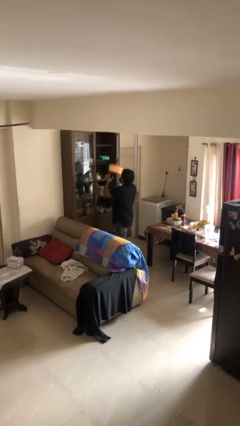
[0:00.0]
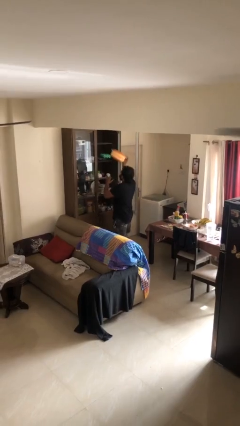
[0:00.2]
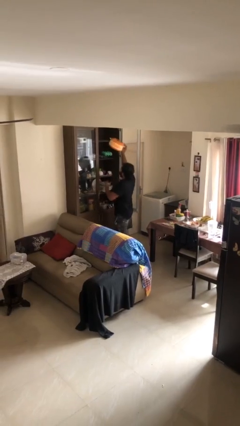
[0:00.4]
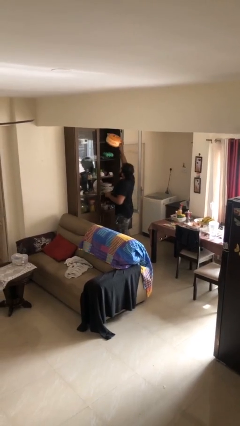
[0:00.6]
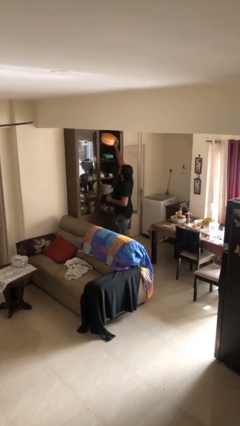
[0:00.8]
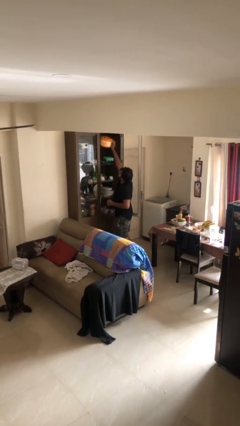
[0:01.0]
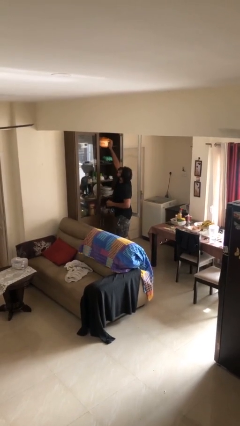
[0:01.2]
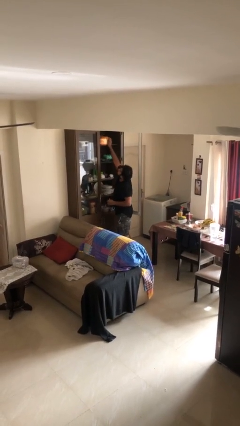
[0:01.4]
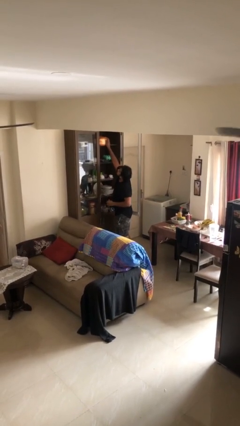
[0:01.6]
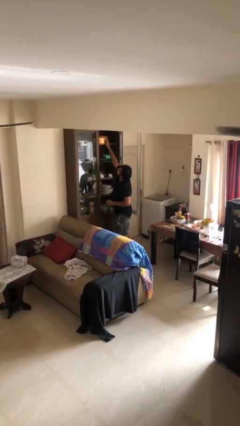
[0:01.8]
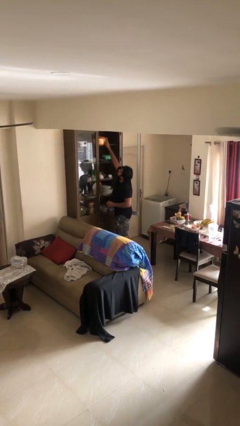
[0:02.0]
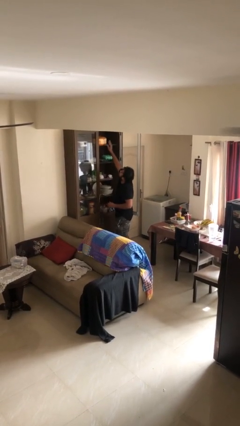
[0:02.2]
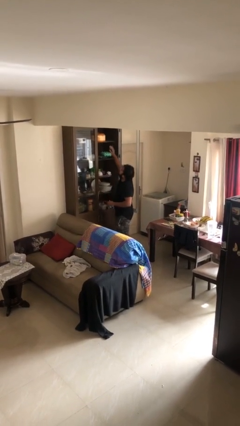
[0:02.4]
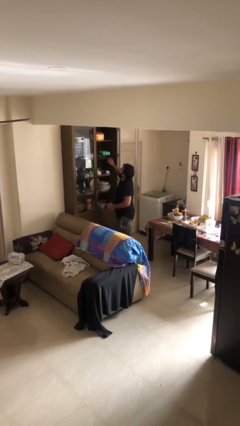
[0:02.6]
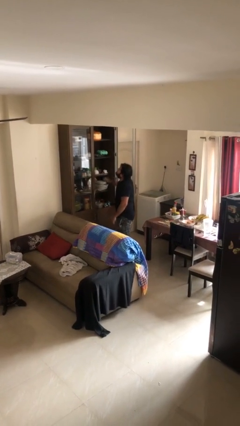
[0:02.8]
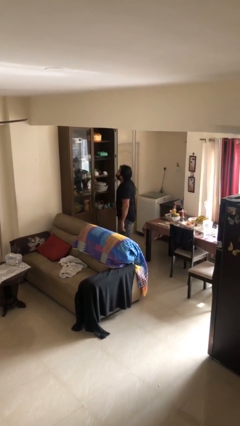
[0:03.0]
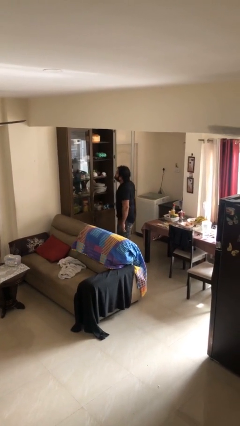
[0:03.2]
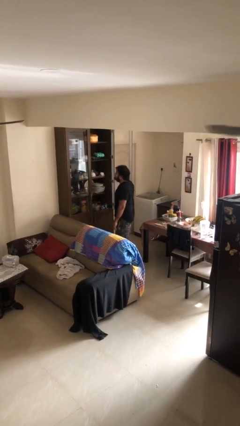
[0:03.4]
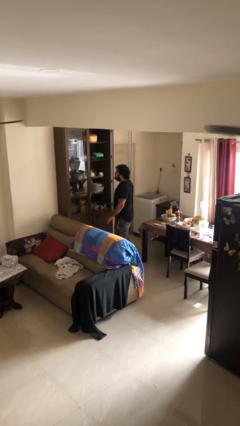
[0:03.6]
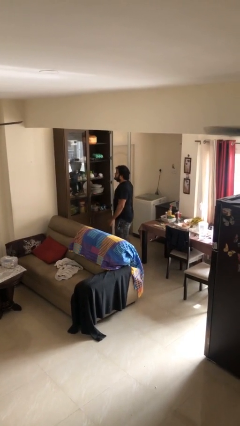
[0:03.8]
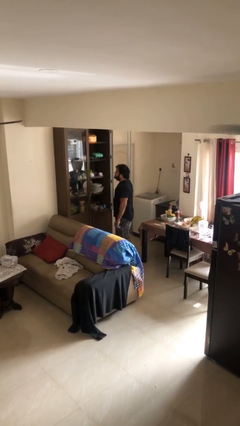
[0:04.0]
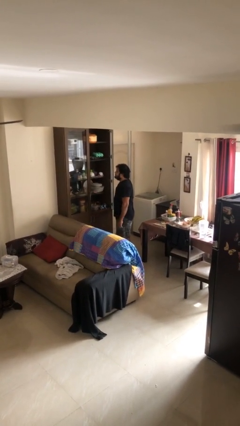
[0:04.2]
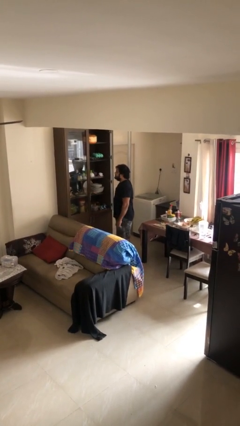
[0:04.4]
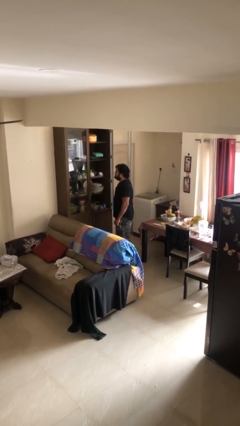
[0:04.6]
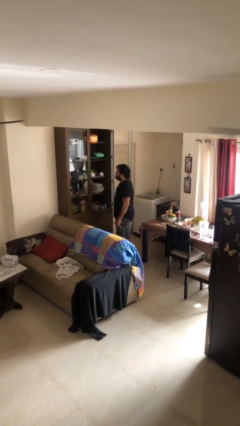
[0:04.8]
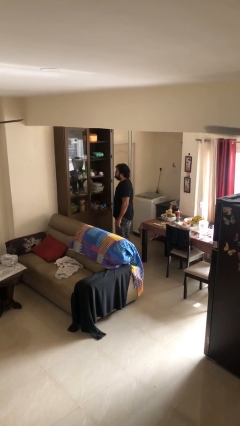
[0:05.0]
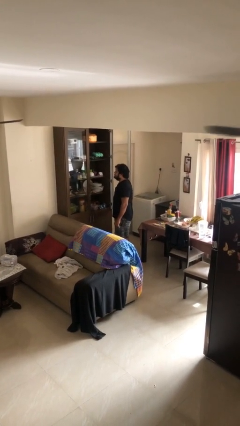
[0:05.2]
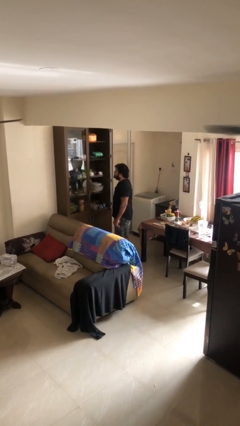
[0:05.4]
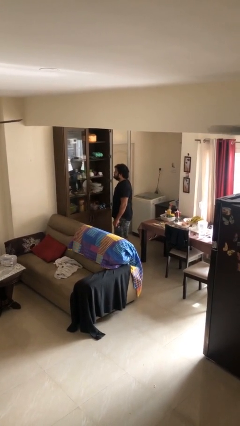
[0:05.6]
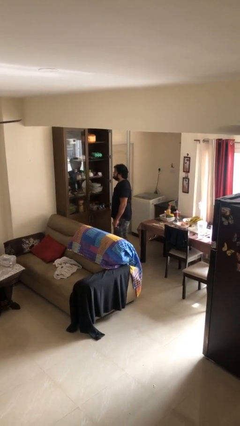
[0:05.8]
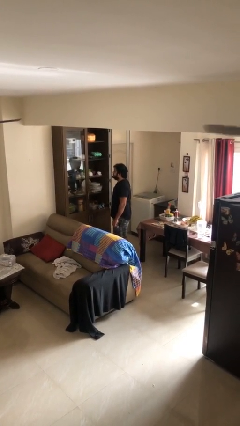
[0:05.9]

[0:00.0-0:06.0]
person puts down object on shelf

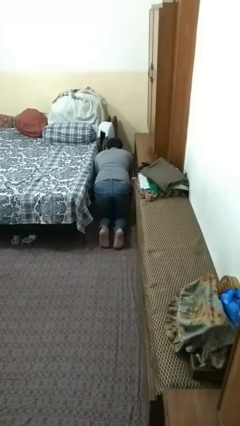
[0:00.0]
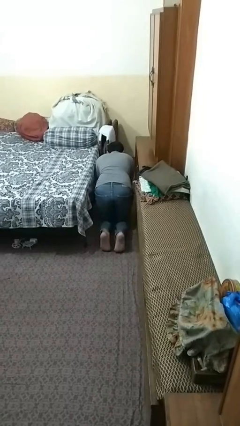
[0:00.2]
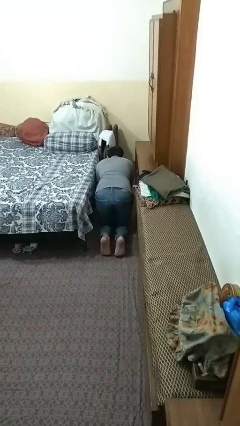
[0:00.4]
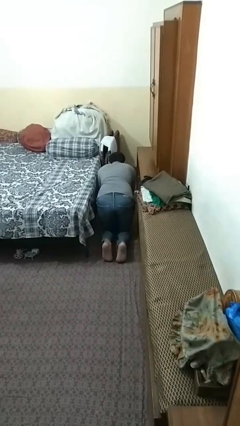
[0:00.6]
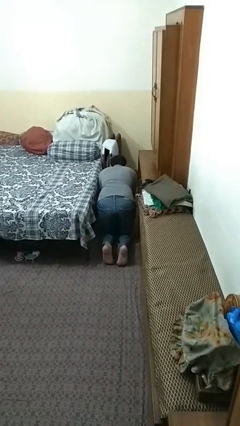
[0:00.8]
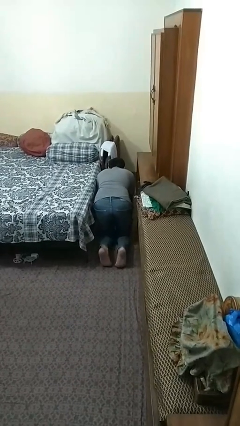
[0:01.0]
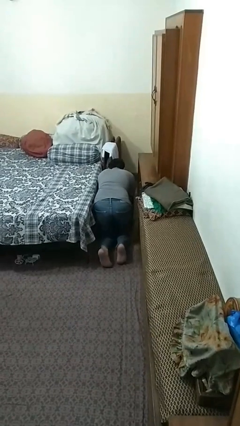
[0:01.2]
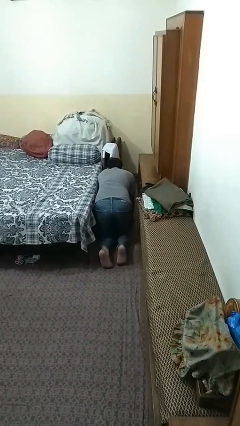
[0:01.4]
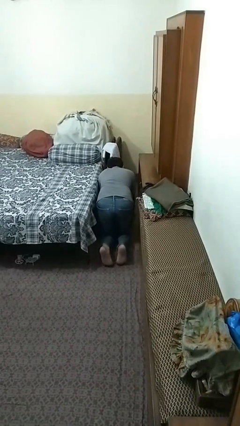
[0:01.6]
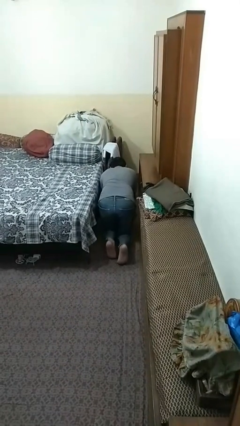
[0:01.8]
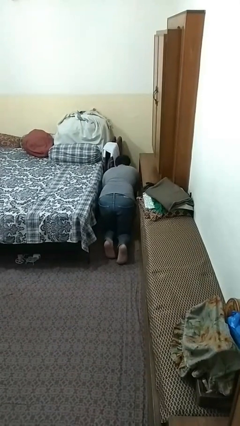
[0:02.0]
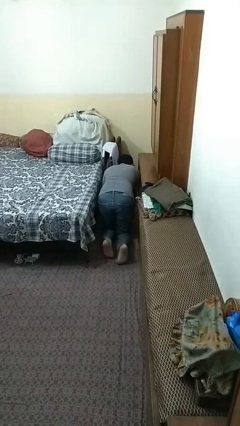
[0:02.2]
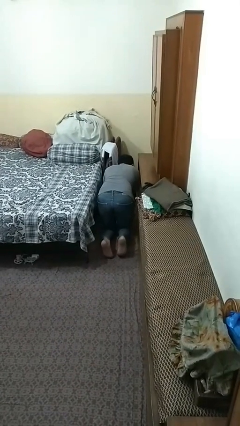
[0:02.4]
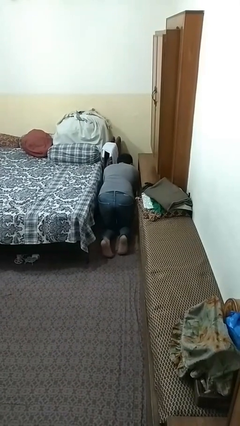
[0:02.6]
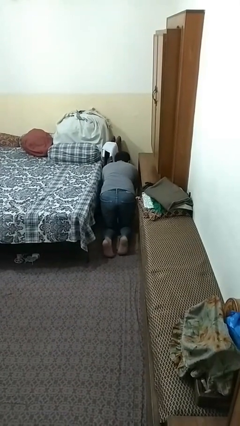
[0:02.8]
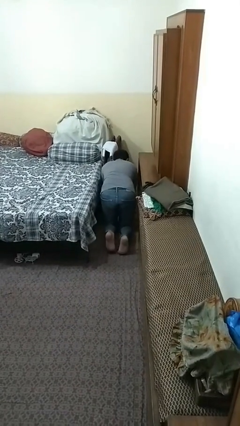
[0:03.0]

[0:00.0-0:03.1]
person crawls

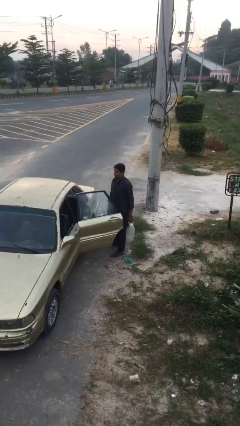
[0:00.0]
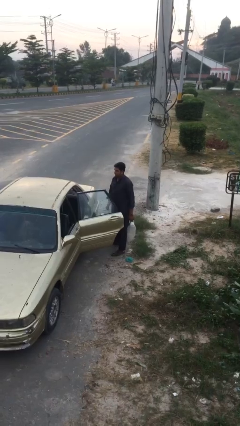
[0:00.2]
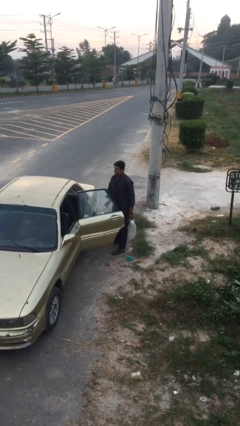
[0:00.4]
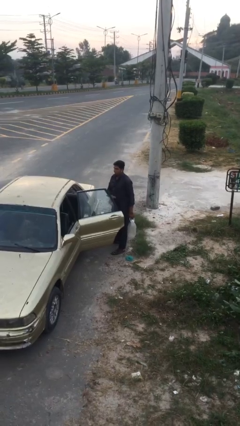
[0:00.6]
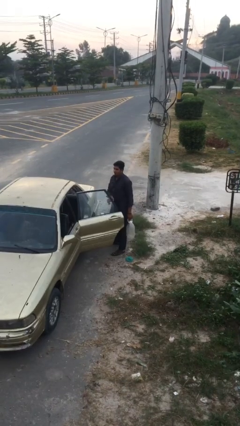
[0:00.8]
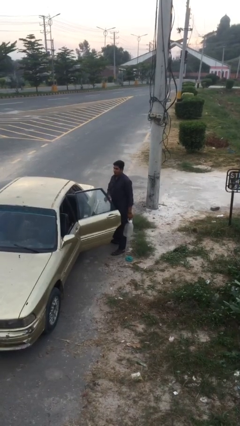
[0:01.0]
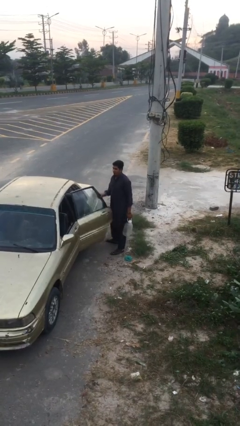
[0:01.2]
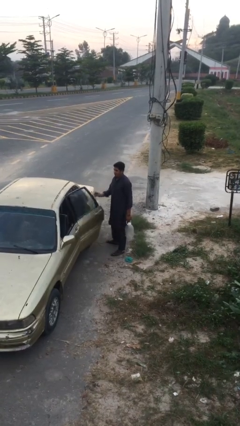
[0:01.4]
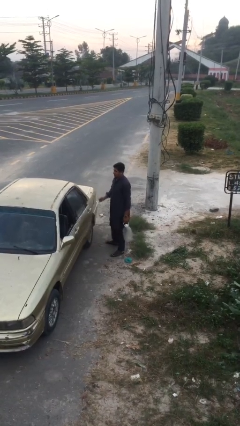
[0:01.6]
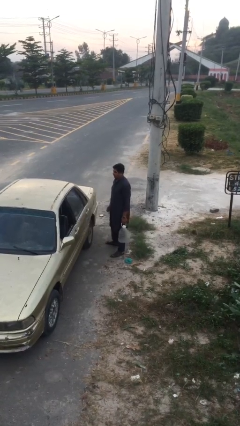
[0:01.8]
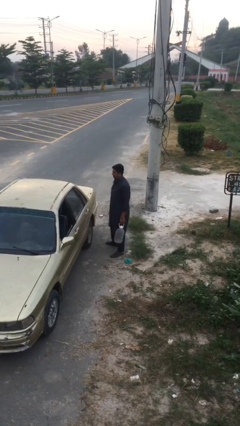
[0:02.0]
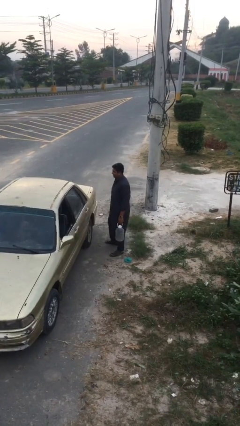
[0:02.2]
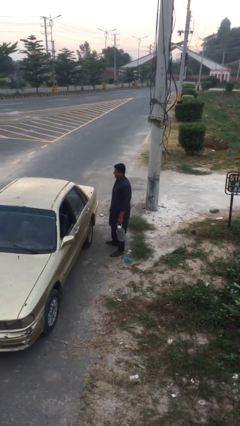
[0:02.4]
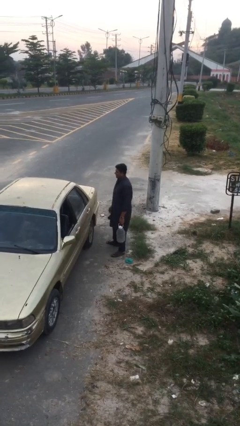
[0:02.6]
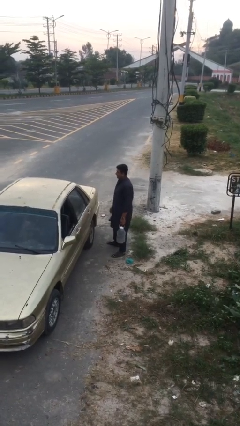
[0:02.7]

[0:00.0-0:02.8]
person closes car door

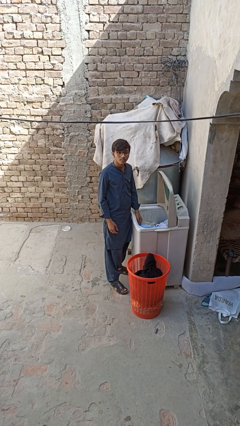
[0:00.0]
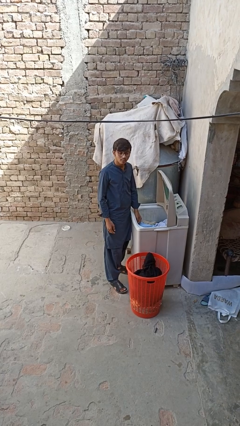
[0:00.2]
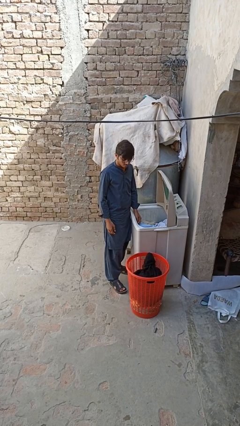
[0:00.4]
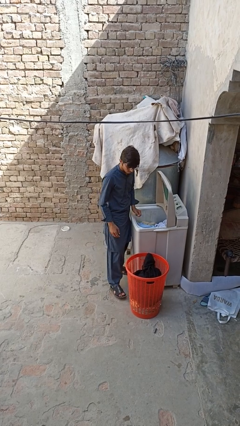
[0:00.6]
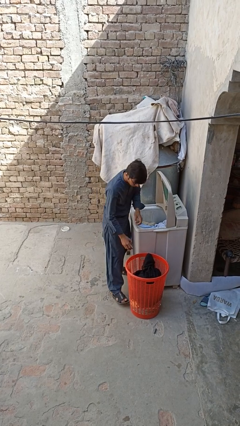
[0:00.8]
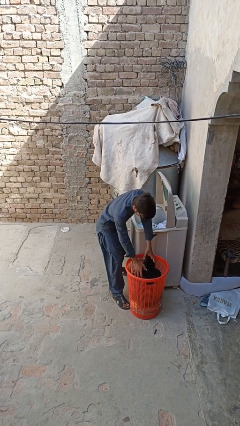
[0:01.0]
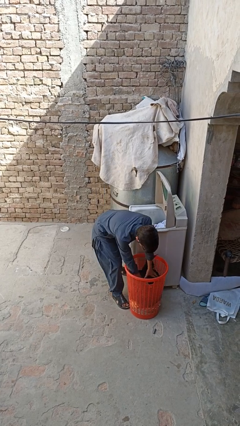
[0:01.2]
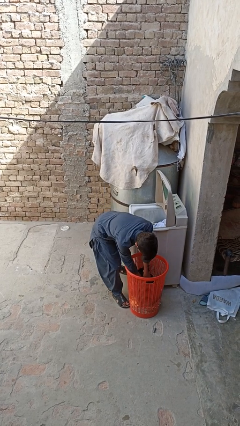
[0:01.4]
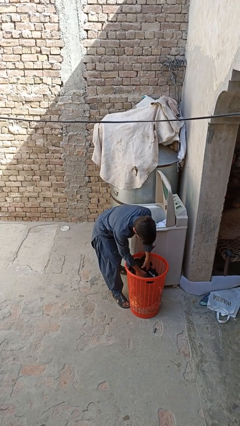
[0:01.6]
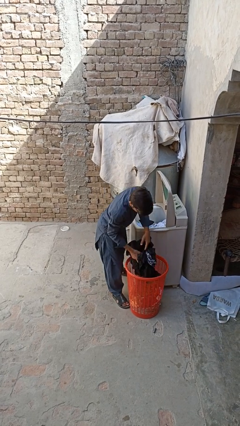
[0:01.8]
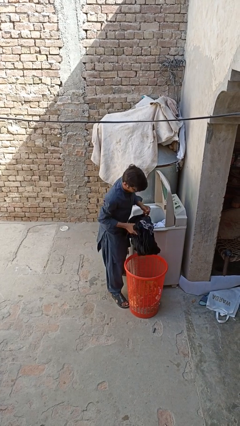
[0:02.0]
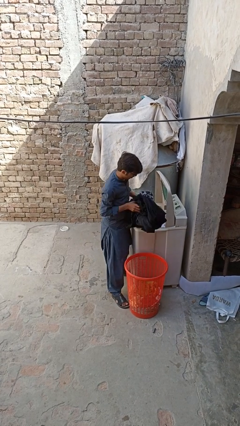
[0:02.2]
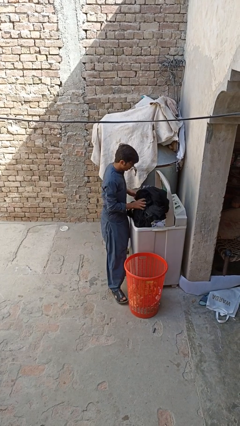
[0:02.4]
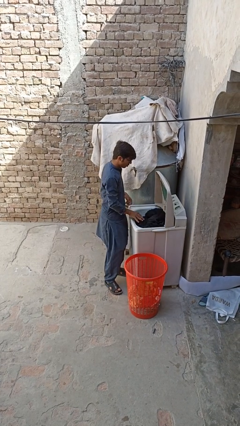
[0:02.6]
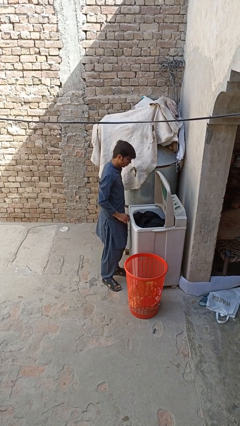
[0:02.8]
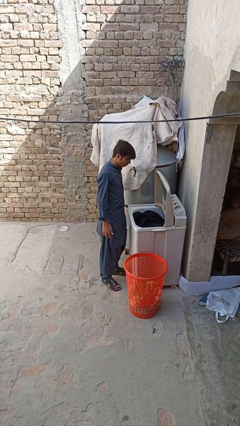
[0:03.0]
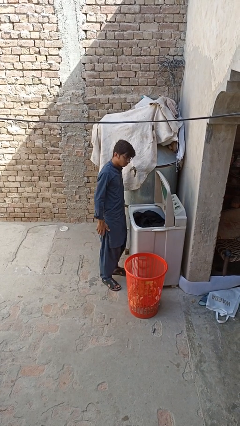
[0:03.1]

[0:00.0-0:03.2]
person loads clotheswasher

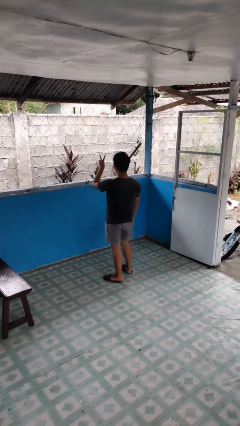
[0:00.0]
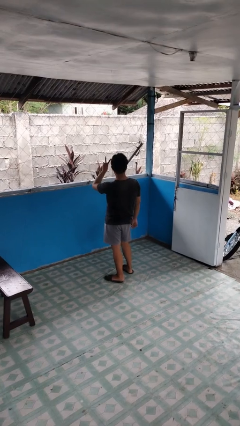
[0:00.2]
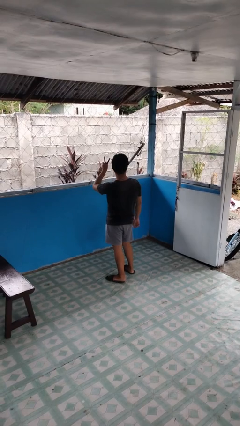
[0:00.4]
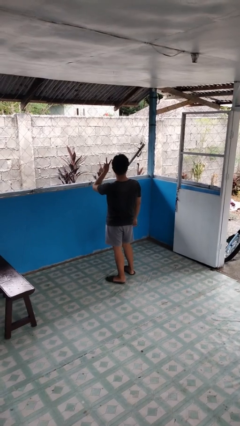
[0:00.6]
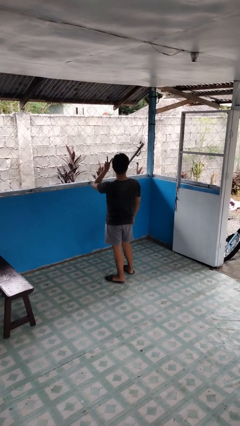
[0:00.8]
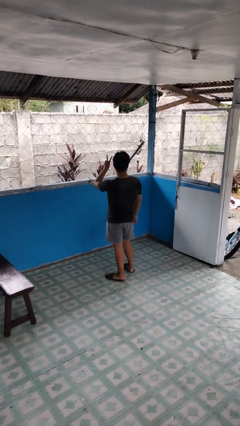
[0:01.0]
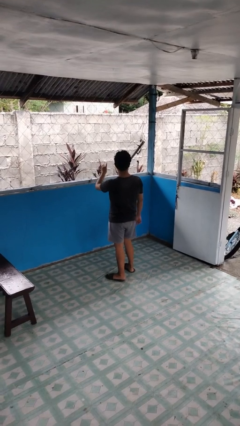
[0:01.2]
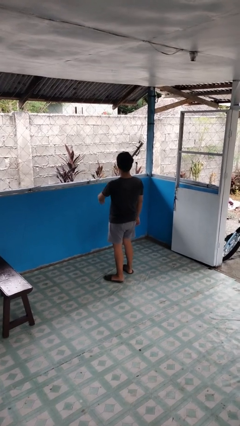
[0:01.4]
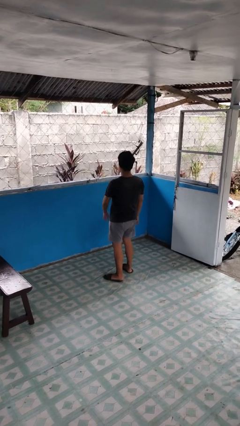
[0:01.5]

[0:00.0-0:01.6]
person gestures peace

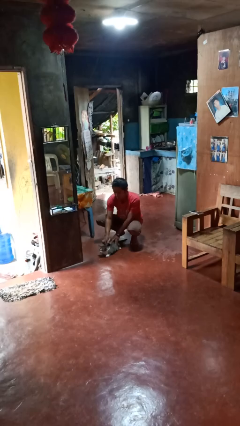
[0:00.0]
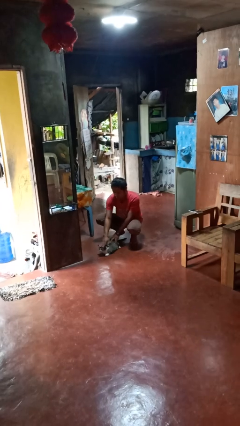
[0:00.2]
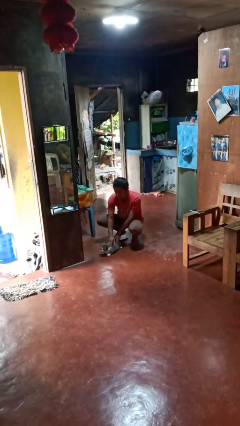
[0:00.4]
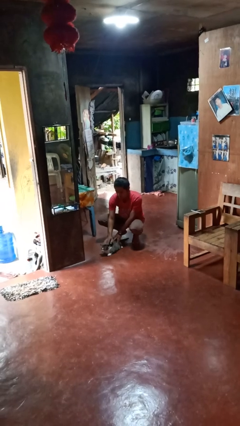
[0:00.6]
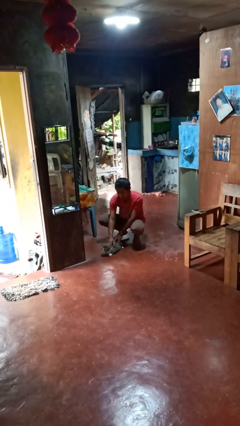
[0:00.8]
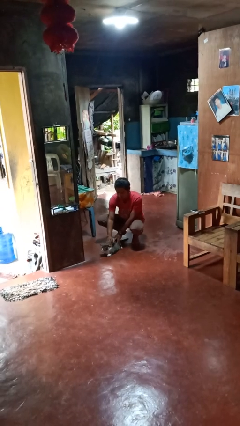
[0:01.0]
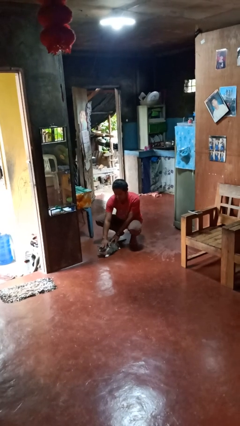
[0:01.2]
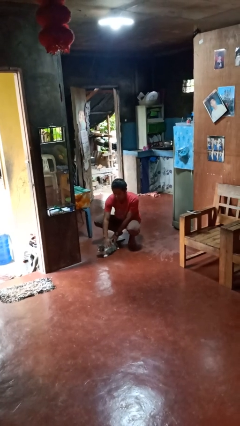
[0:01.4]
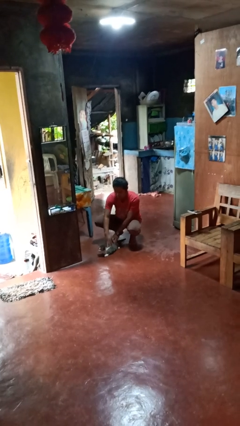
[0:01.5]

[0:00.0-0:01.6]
person pets cat
